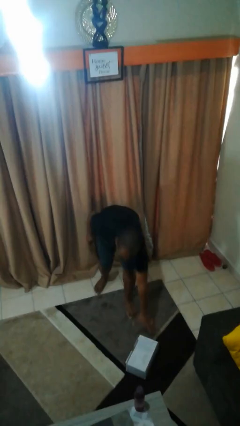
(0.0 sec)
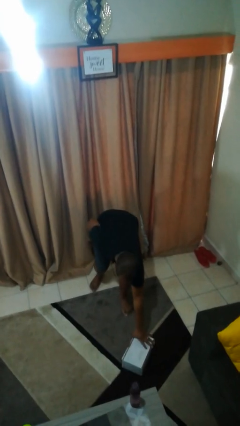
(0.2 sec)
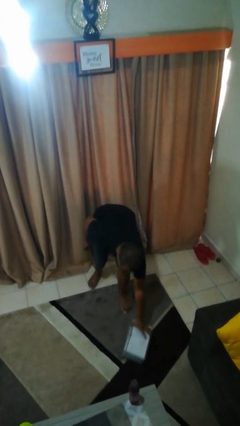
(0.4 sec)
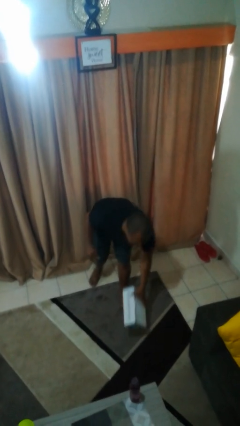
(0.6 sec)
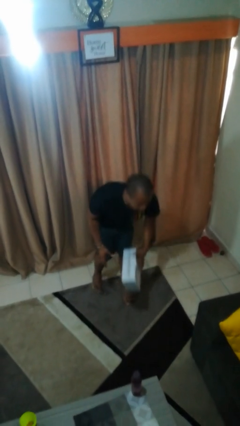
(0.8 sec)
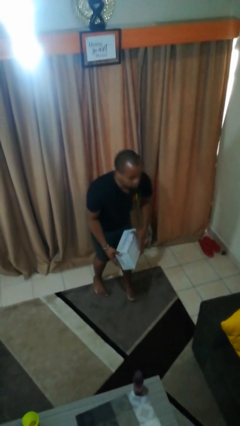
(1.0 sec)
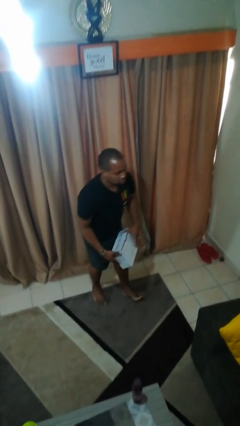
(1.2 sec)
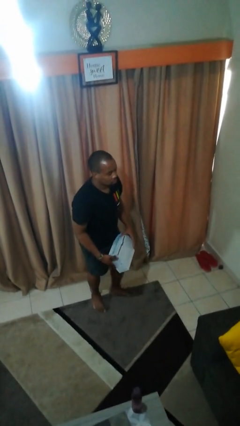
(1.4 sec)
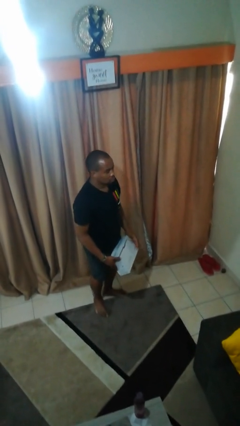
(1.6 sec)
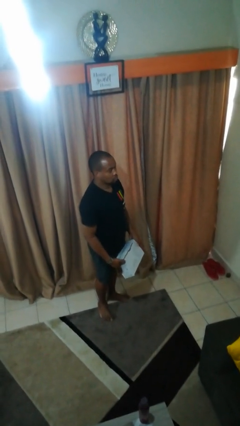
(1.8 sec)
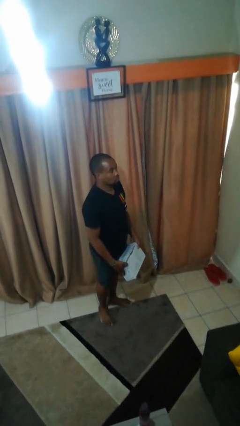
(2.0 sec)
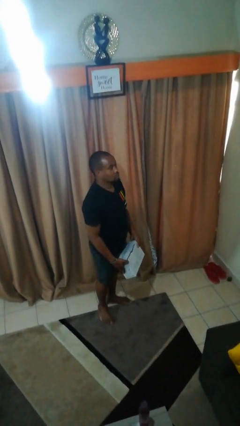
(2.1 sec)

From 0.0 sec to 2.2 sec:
person picks up object from floor

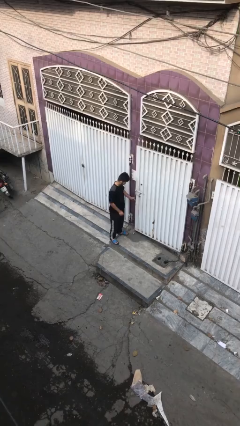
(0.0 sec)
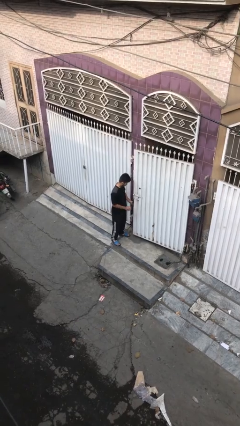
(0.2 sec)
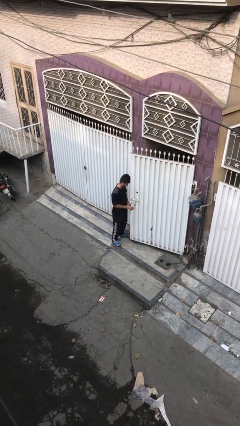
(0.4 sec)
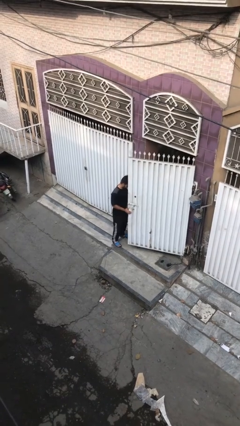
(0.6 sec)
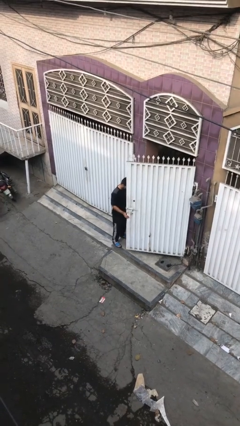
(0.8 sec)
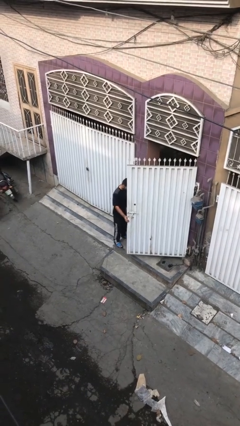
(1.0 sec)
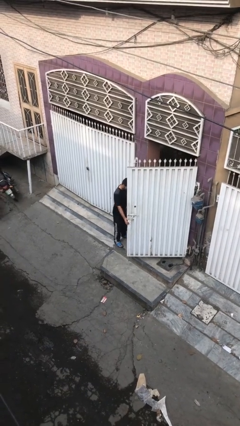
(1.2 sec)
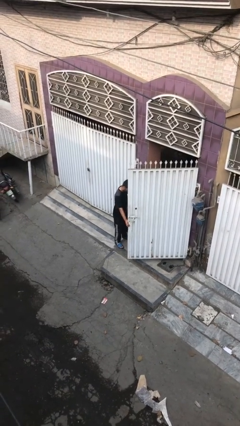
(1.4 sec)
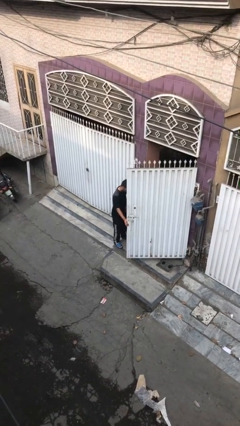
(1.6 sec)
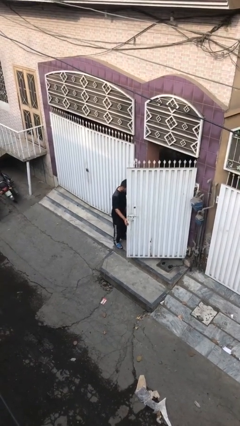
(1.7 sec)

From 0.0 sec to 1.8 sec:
person opens facility door

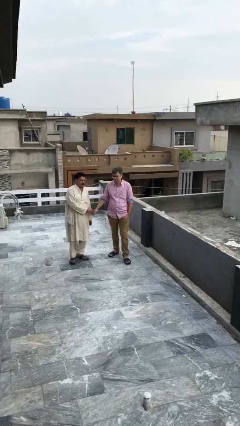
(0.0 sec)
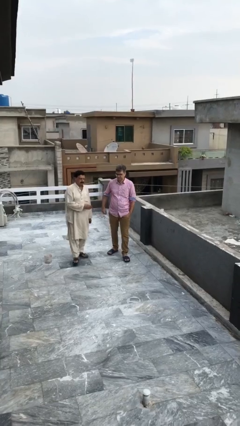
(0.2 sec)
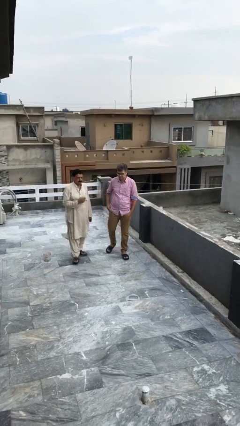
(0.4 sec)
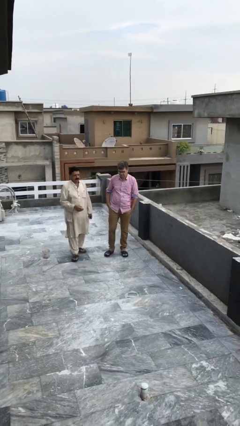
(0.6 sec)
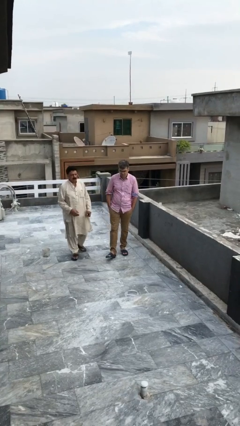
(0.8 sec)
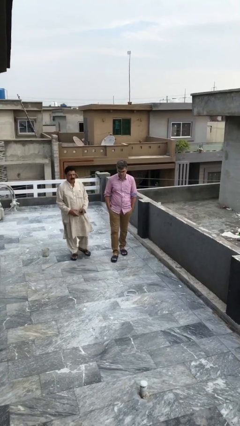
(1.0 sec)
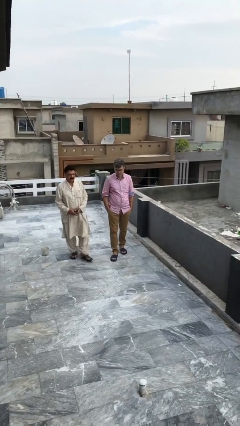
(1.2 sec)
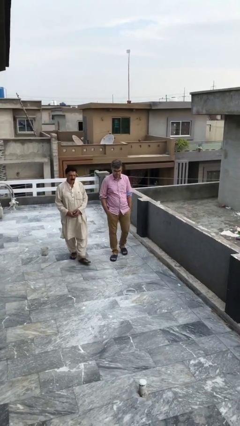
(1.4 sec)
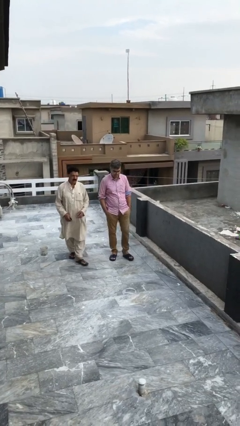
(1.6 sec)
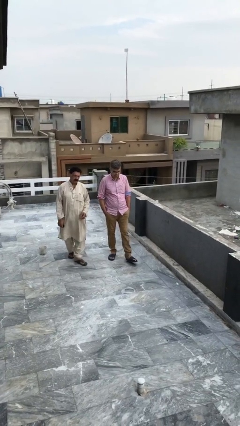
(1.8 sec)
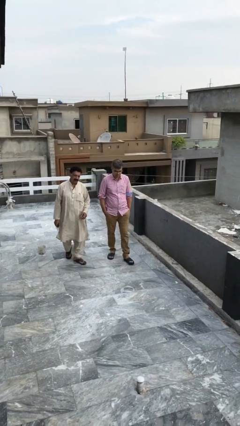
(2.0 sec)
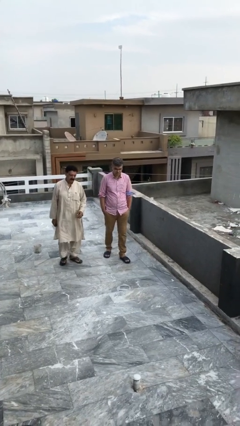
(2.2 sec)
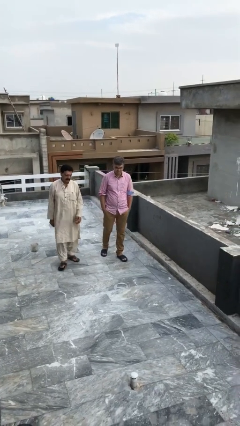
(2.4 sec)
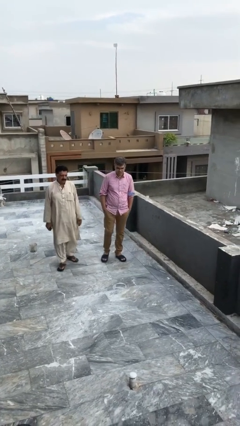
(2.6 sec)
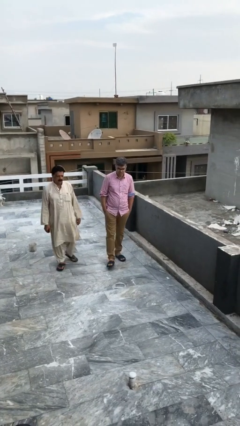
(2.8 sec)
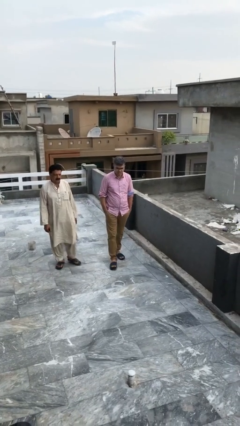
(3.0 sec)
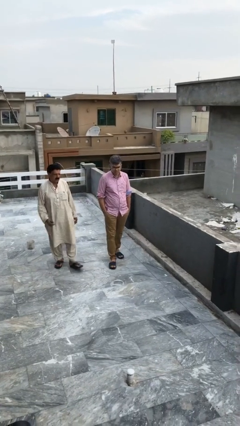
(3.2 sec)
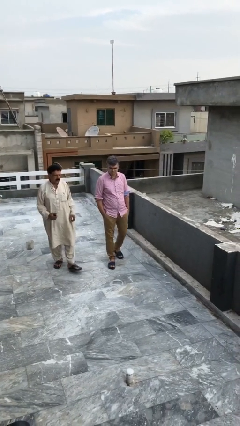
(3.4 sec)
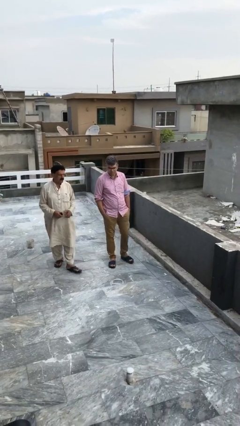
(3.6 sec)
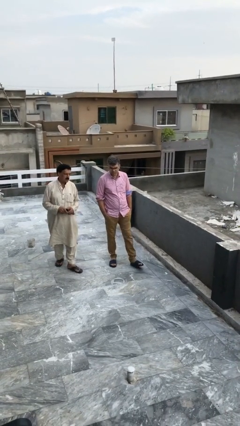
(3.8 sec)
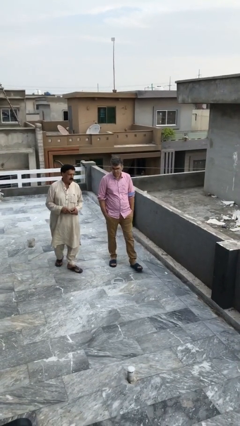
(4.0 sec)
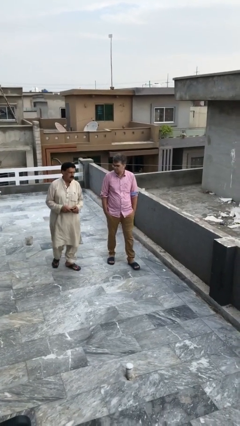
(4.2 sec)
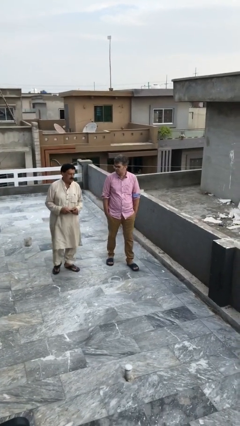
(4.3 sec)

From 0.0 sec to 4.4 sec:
person talks to person

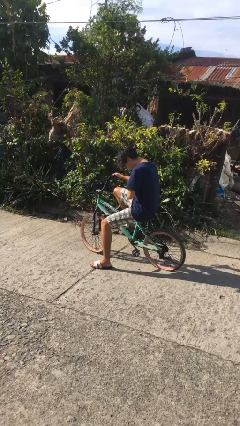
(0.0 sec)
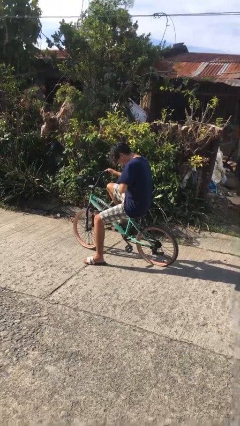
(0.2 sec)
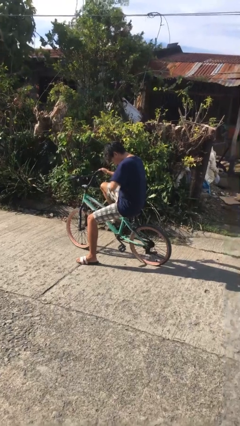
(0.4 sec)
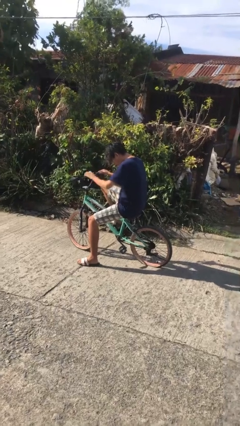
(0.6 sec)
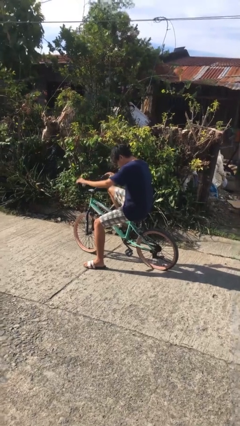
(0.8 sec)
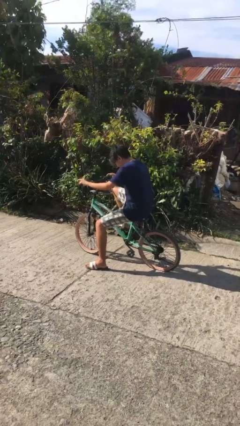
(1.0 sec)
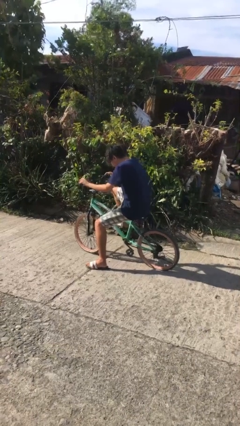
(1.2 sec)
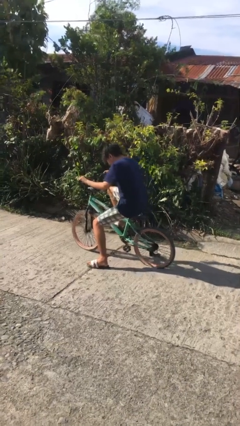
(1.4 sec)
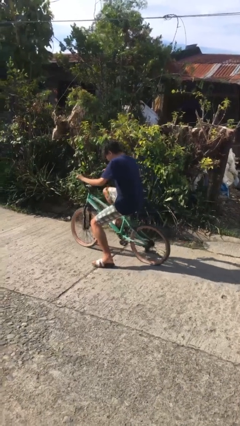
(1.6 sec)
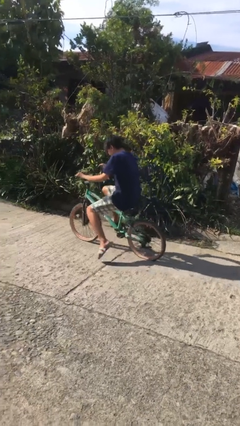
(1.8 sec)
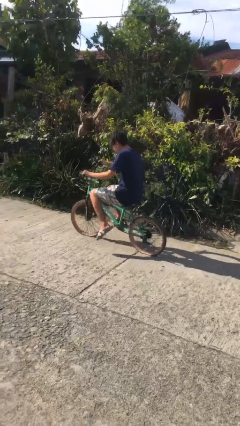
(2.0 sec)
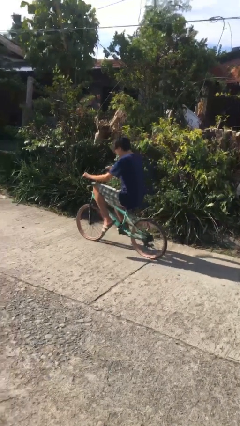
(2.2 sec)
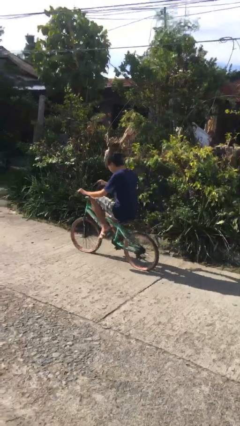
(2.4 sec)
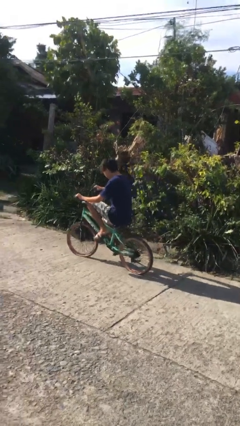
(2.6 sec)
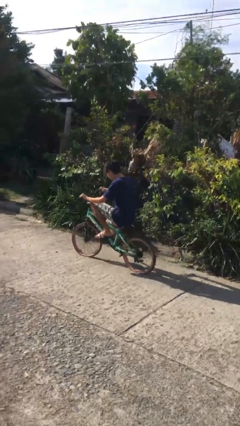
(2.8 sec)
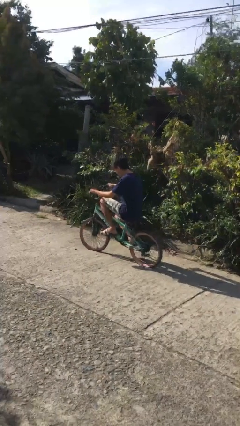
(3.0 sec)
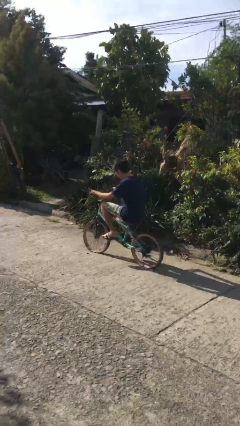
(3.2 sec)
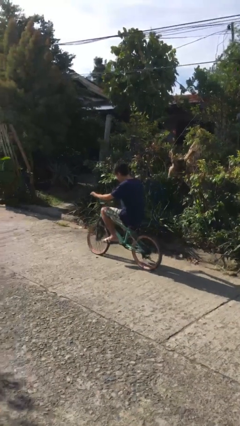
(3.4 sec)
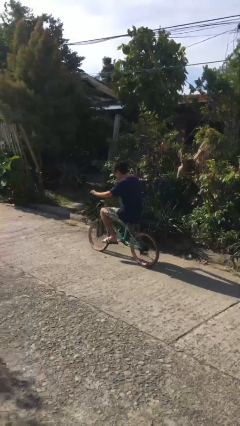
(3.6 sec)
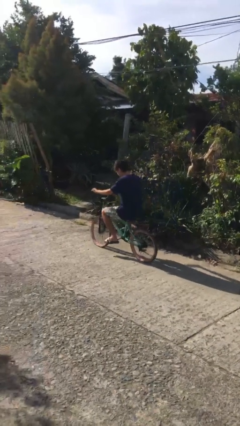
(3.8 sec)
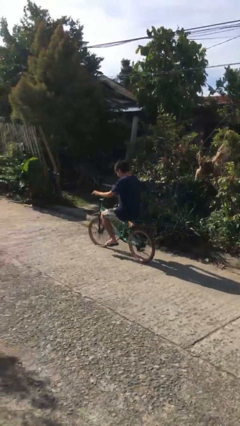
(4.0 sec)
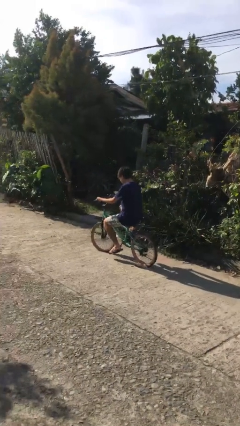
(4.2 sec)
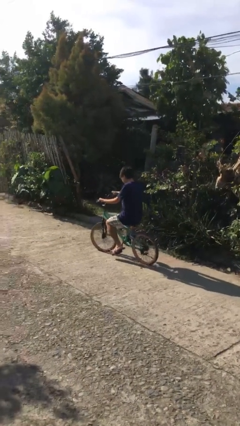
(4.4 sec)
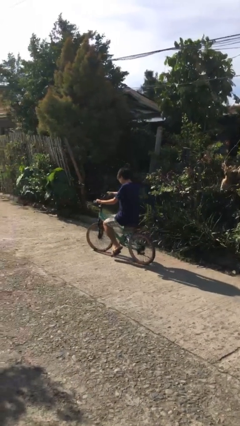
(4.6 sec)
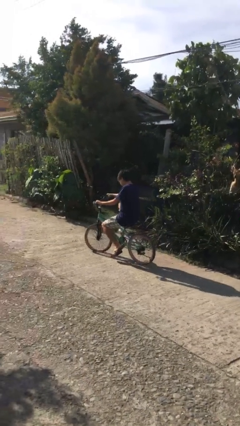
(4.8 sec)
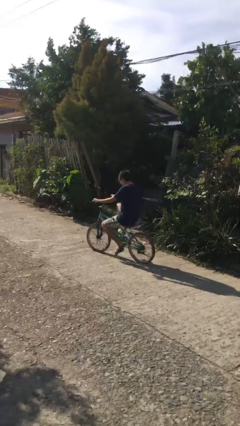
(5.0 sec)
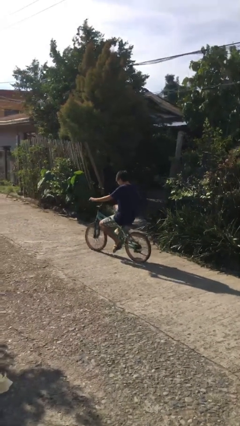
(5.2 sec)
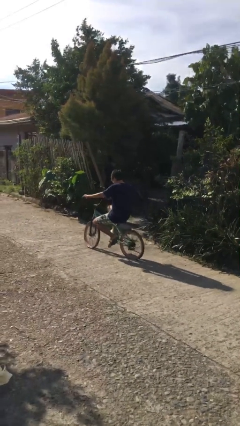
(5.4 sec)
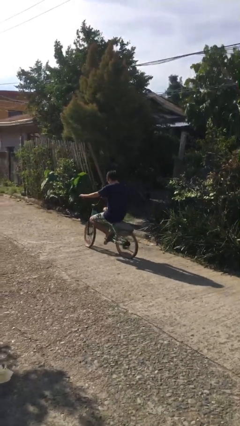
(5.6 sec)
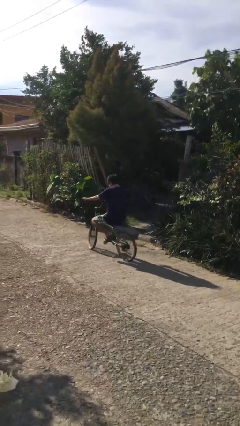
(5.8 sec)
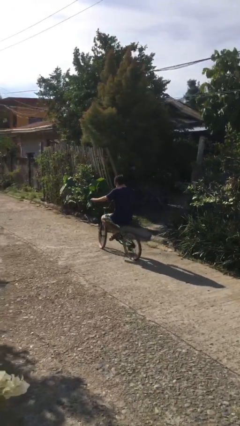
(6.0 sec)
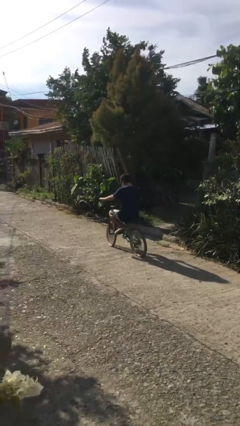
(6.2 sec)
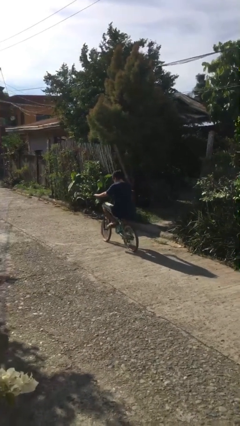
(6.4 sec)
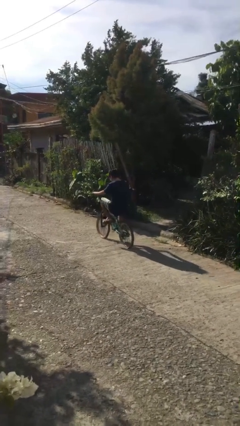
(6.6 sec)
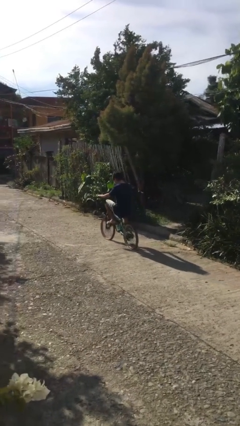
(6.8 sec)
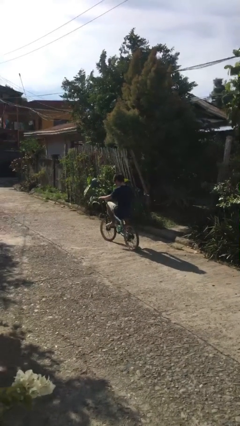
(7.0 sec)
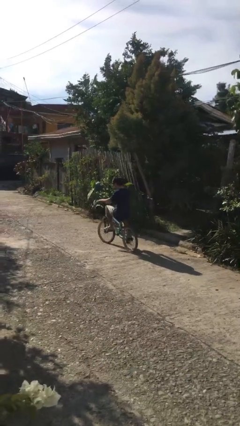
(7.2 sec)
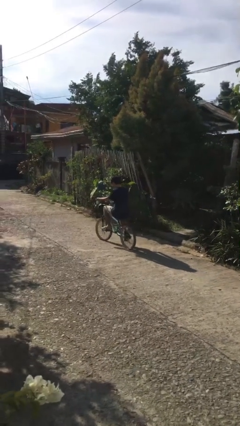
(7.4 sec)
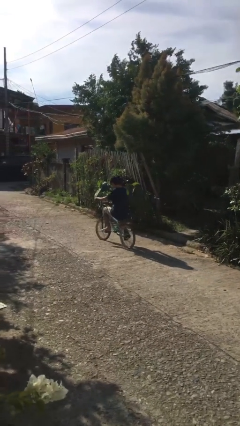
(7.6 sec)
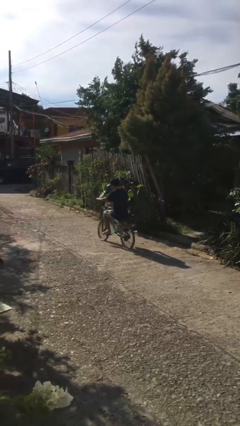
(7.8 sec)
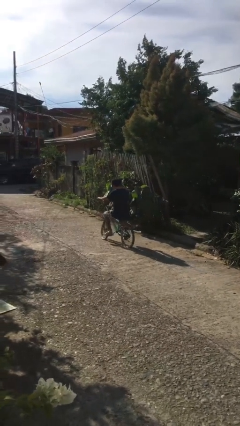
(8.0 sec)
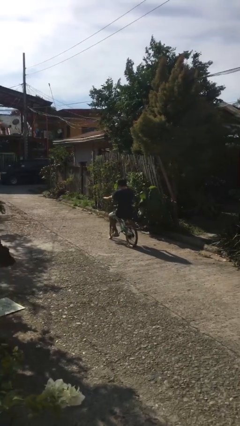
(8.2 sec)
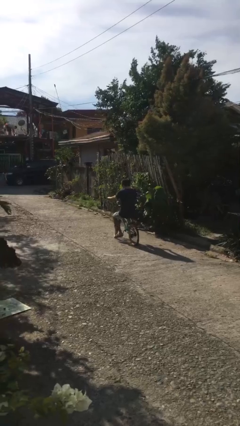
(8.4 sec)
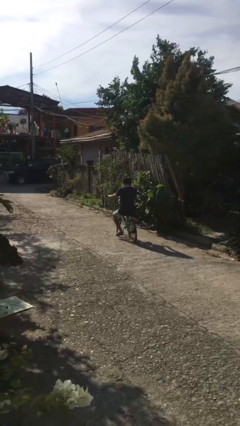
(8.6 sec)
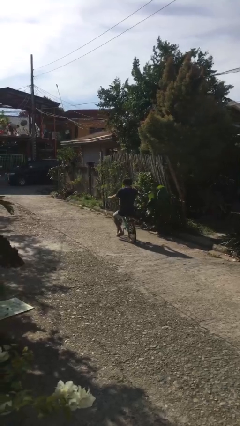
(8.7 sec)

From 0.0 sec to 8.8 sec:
person rides bicycle

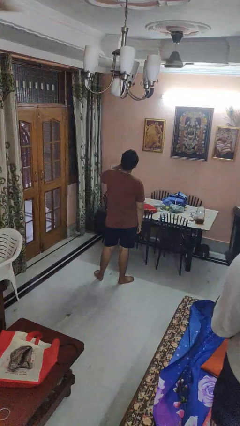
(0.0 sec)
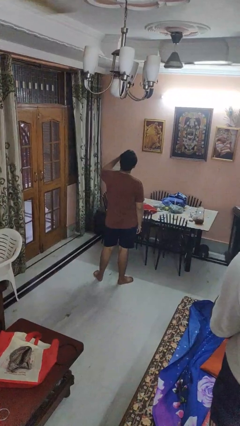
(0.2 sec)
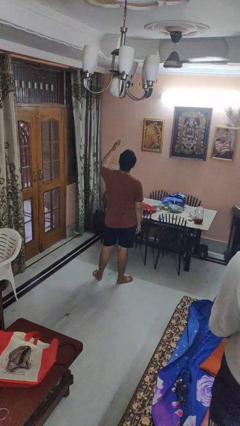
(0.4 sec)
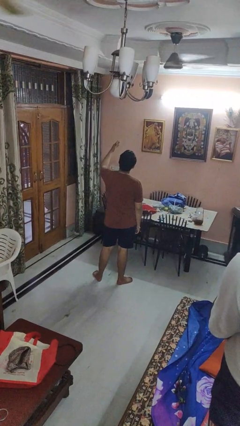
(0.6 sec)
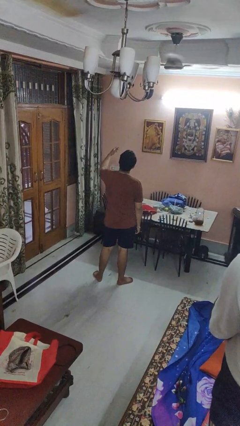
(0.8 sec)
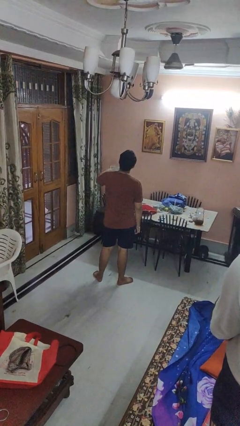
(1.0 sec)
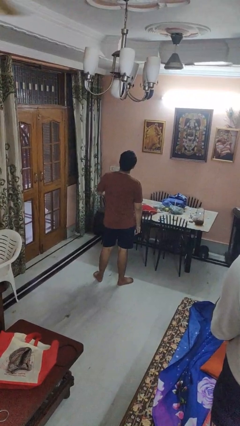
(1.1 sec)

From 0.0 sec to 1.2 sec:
person gestures blow kiss
